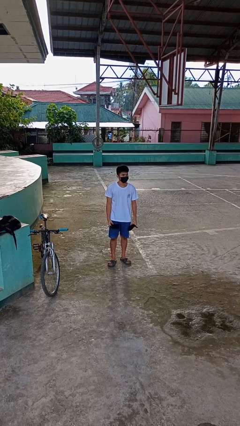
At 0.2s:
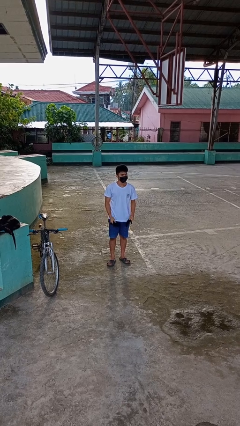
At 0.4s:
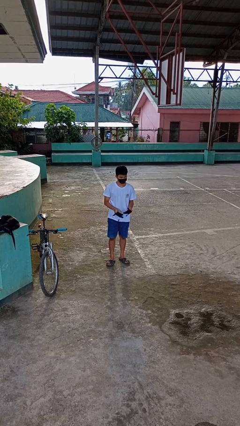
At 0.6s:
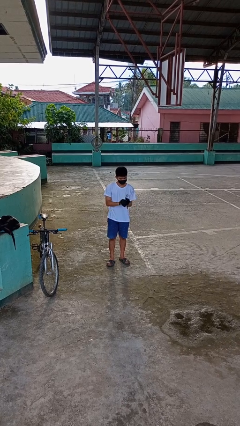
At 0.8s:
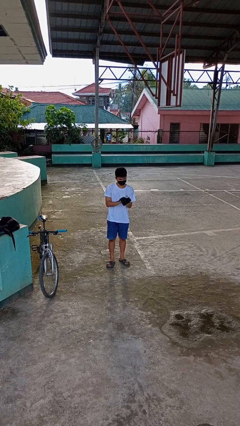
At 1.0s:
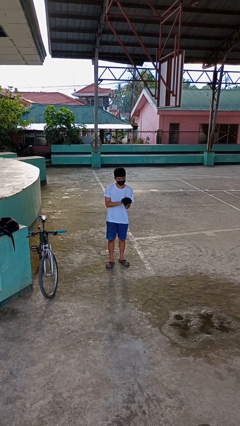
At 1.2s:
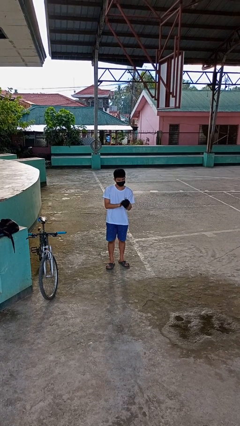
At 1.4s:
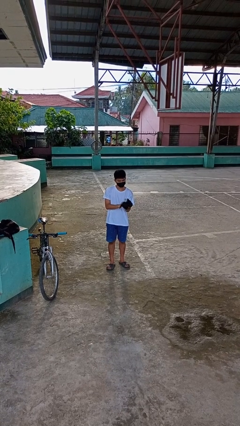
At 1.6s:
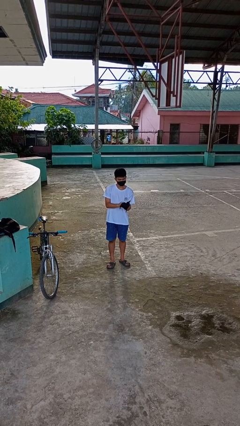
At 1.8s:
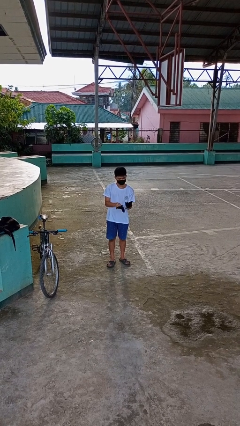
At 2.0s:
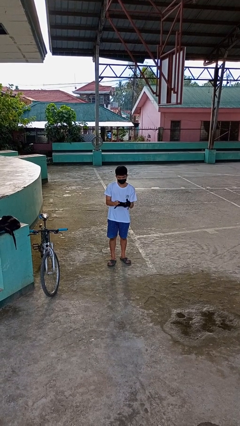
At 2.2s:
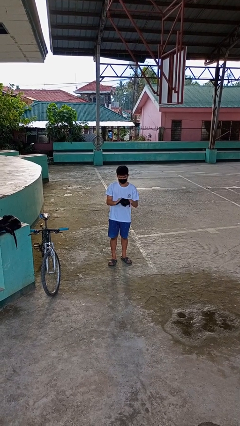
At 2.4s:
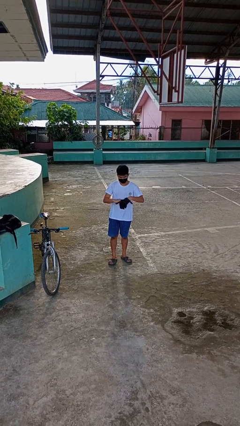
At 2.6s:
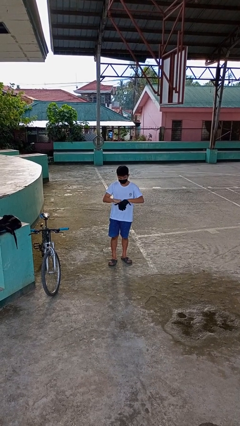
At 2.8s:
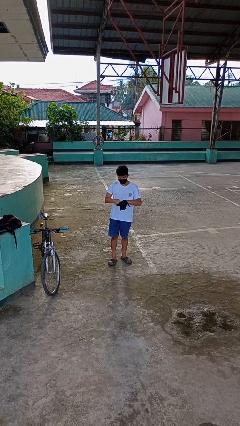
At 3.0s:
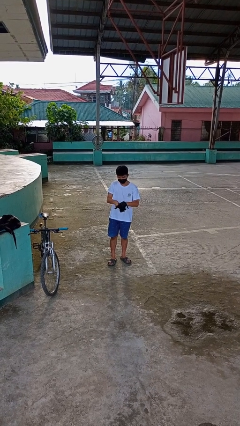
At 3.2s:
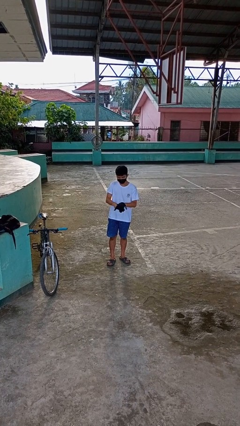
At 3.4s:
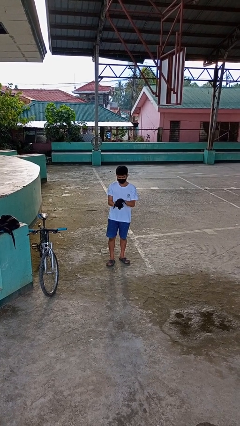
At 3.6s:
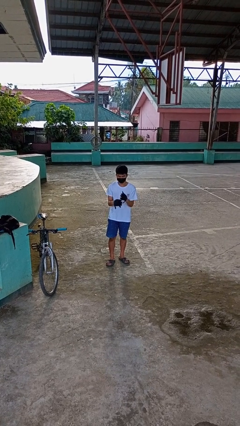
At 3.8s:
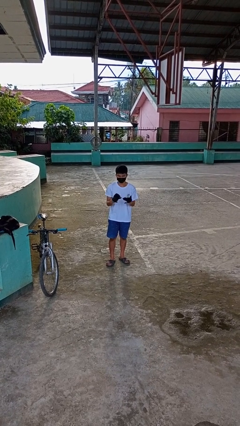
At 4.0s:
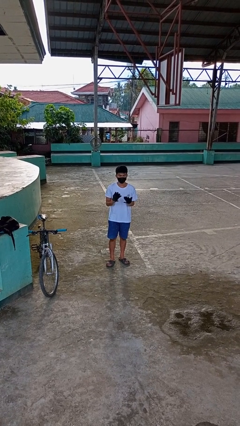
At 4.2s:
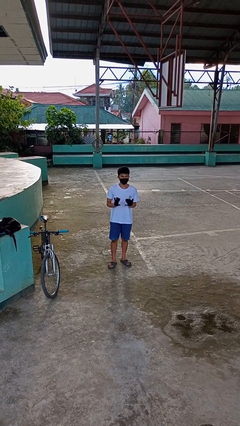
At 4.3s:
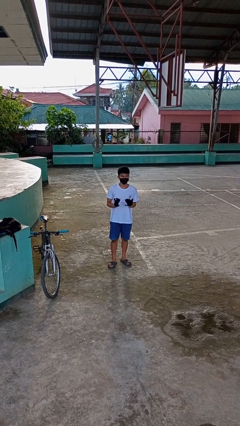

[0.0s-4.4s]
person puts on gloves

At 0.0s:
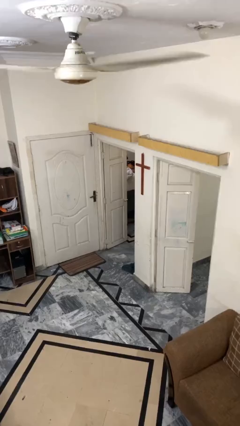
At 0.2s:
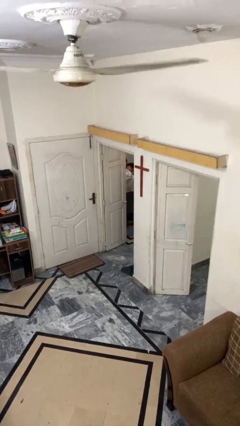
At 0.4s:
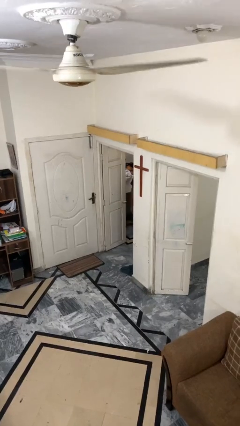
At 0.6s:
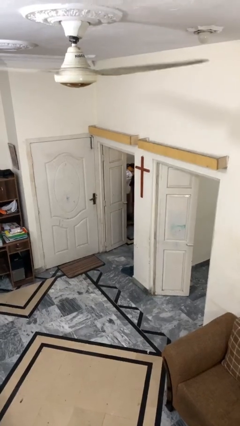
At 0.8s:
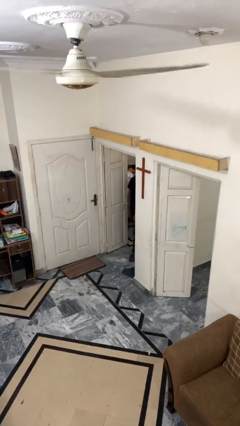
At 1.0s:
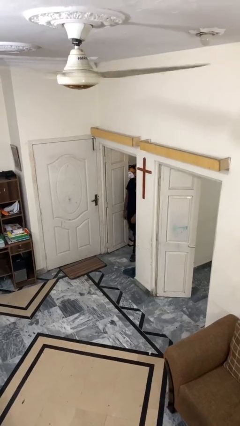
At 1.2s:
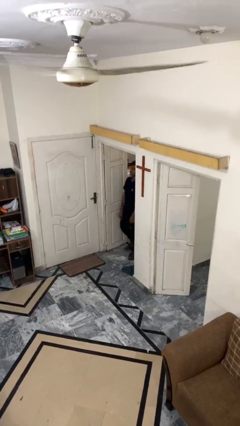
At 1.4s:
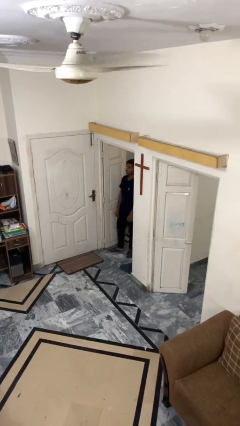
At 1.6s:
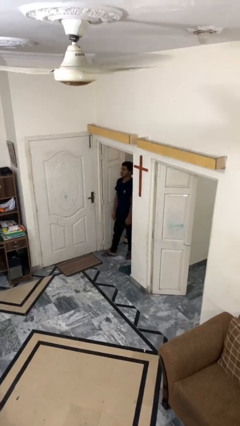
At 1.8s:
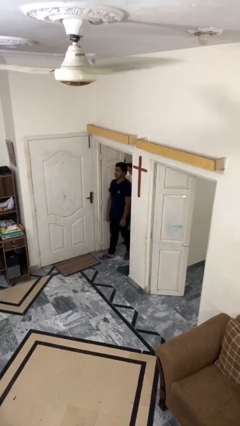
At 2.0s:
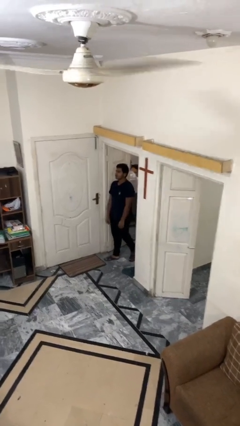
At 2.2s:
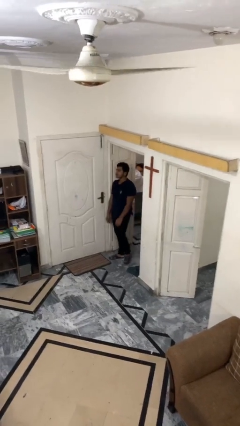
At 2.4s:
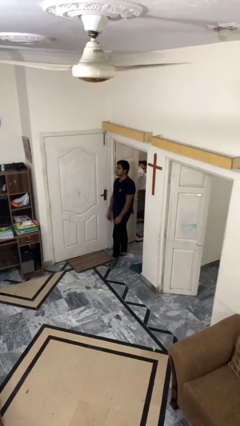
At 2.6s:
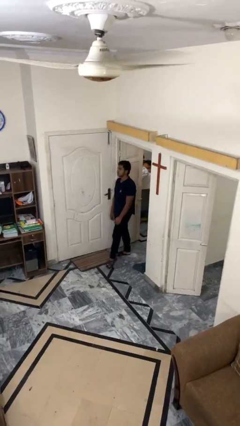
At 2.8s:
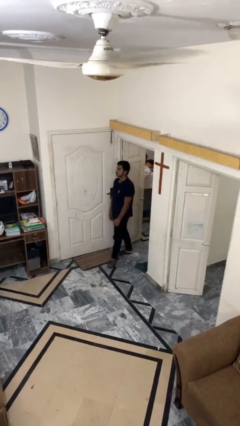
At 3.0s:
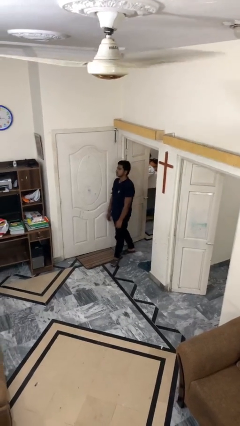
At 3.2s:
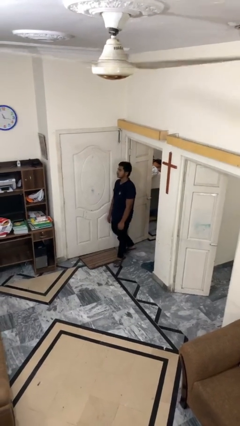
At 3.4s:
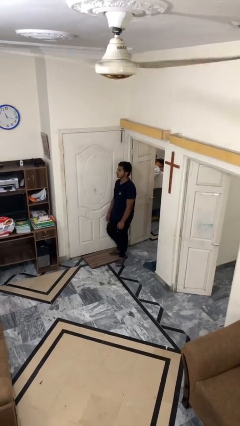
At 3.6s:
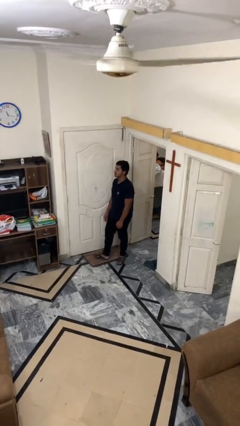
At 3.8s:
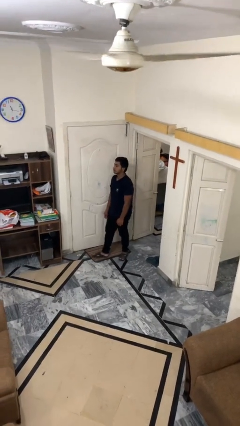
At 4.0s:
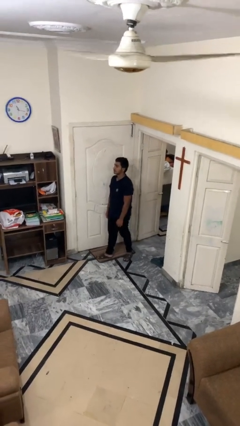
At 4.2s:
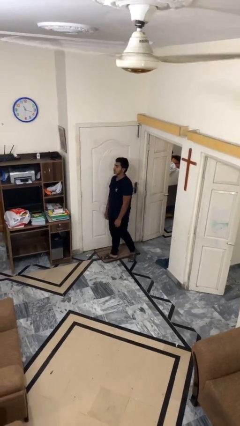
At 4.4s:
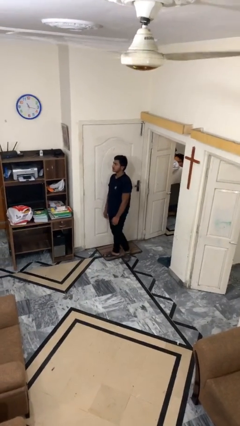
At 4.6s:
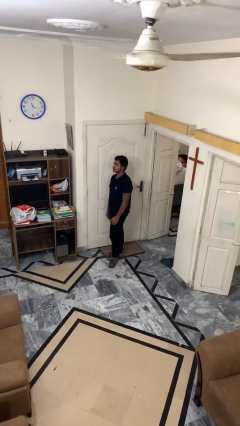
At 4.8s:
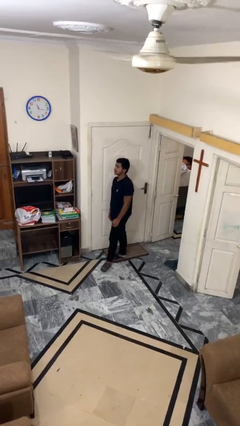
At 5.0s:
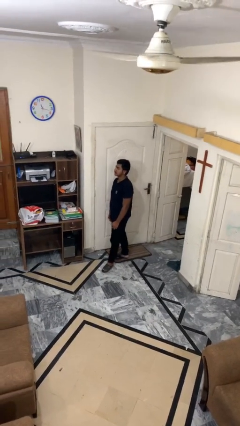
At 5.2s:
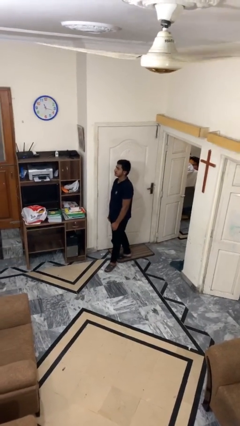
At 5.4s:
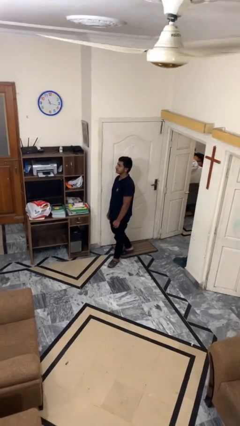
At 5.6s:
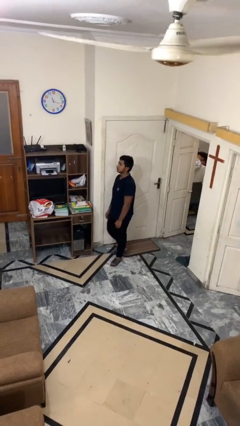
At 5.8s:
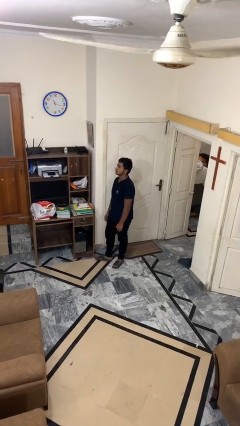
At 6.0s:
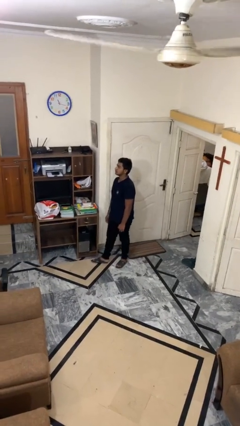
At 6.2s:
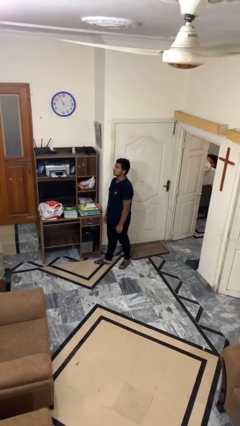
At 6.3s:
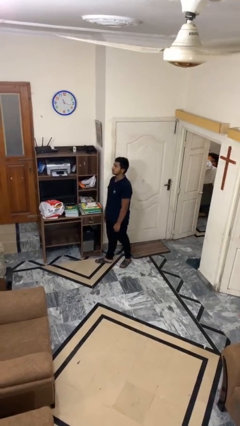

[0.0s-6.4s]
person enters scene through structure

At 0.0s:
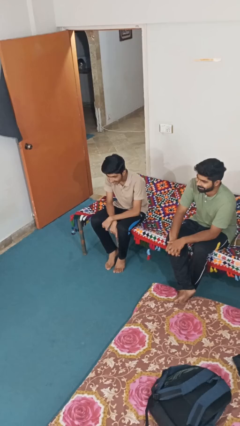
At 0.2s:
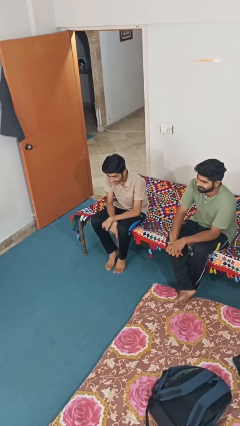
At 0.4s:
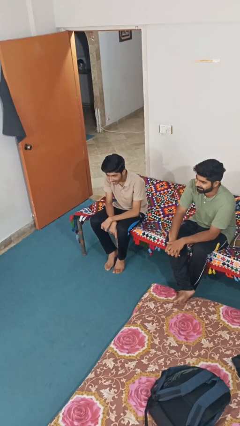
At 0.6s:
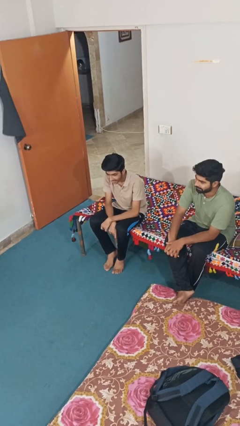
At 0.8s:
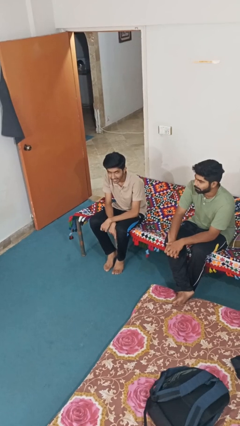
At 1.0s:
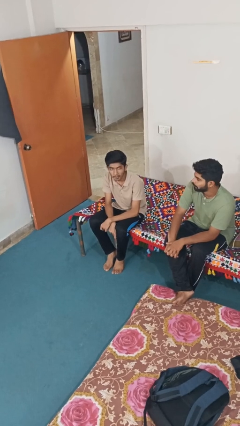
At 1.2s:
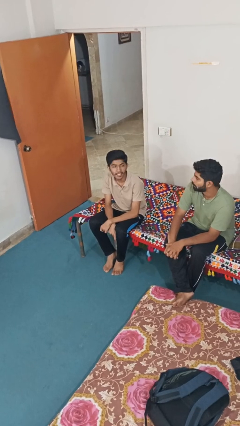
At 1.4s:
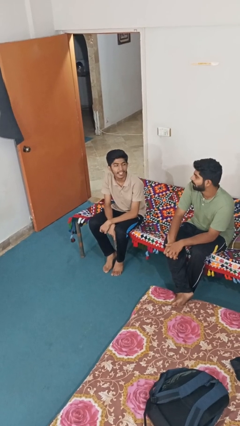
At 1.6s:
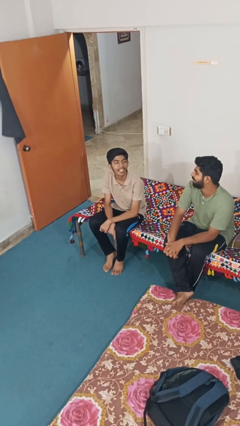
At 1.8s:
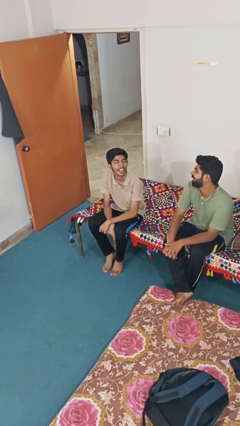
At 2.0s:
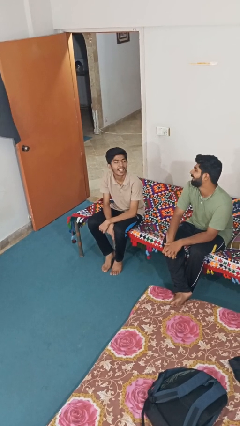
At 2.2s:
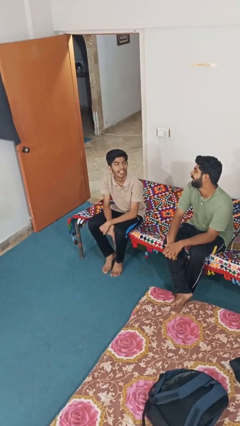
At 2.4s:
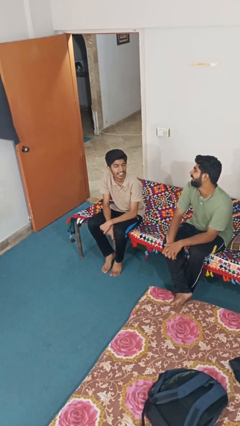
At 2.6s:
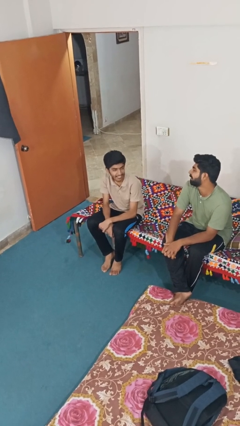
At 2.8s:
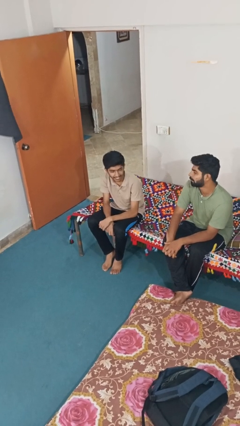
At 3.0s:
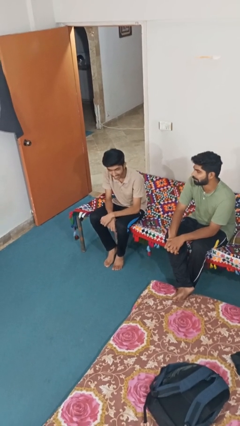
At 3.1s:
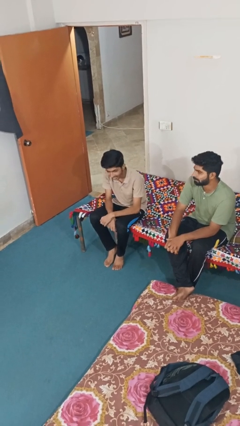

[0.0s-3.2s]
person laughs with person

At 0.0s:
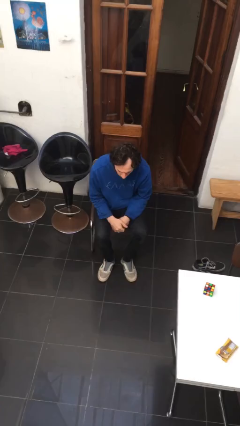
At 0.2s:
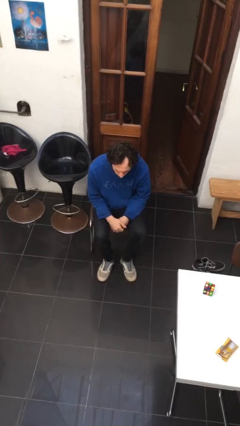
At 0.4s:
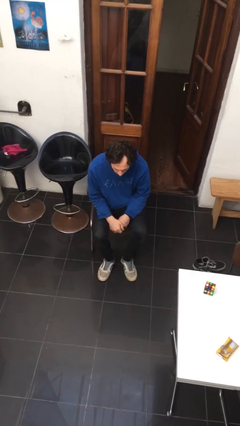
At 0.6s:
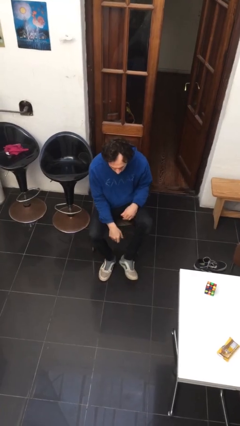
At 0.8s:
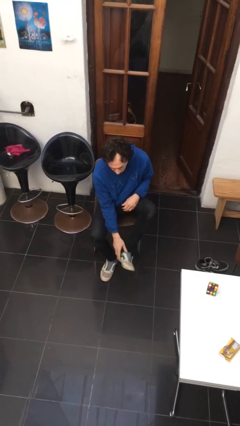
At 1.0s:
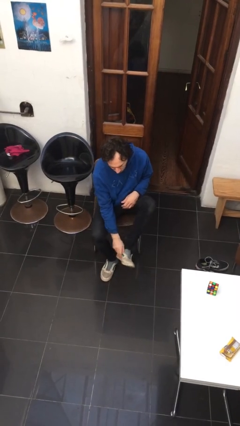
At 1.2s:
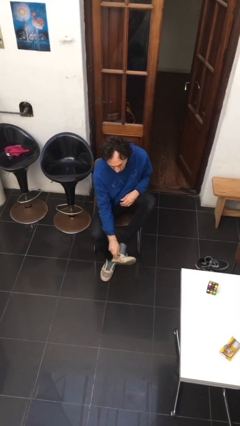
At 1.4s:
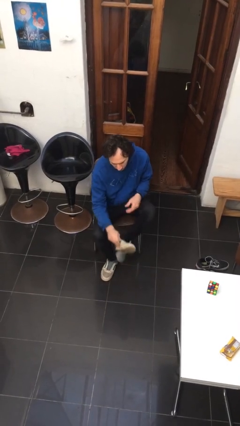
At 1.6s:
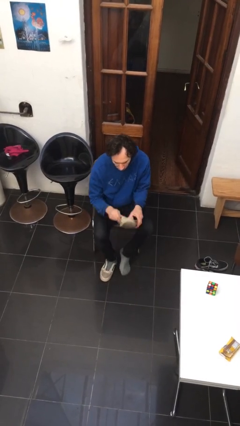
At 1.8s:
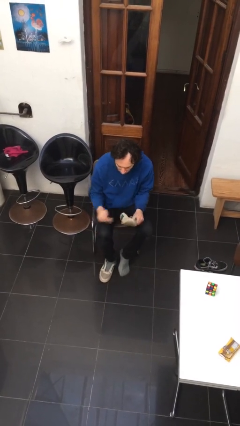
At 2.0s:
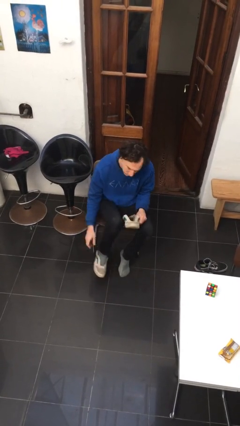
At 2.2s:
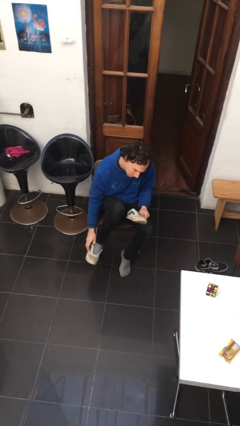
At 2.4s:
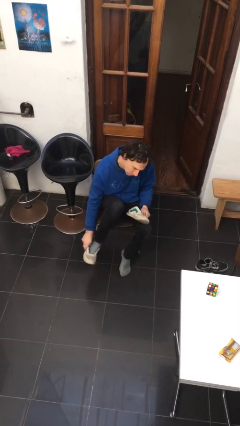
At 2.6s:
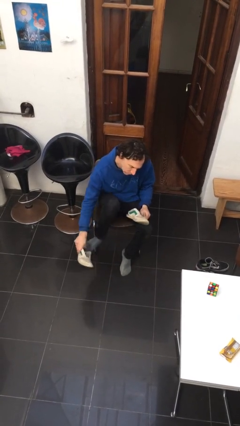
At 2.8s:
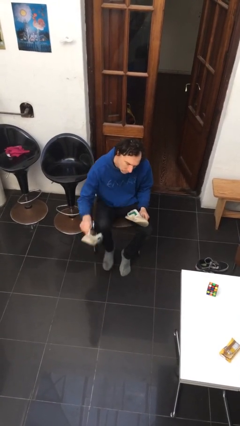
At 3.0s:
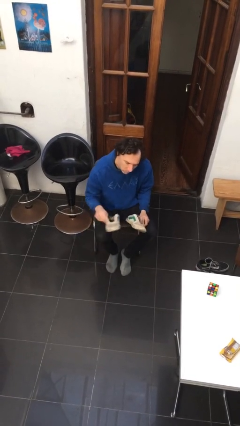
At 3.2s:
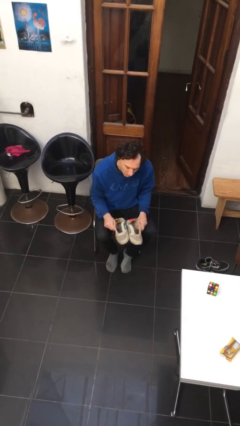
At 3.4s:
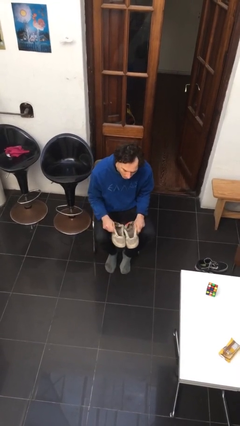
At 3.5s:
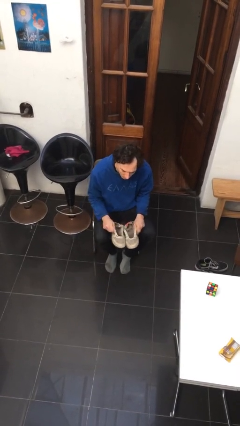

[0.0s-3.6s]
person takes off shoes
